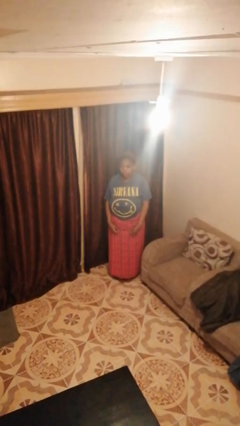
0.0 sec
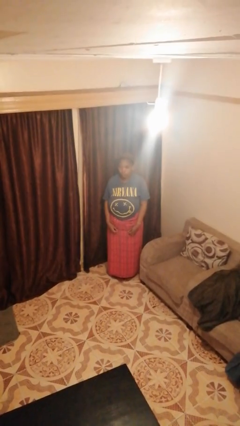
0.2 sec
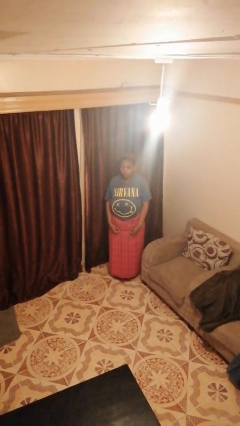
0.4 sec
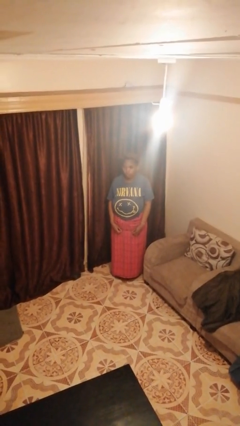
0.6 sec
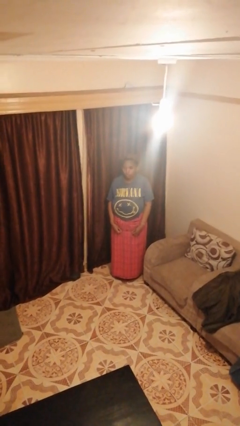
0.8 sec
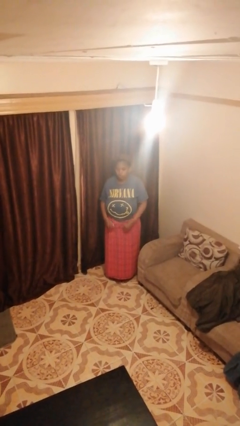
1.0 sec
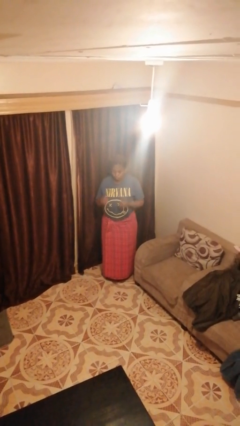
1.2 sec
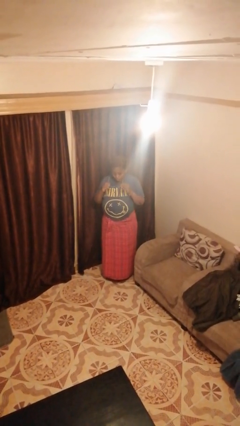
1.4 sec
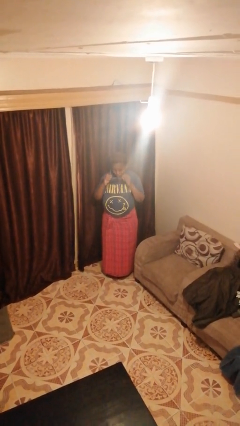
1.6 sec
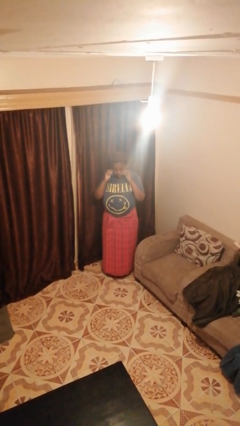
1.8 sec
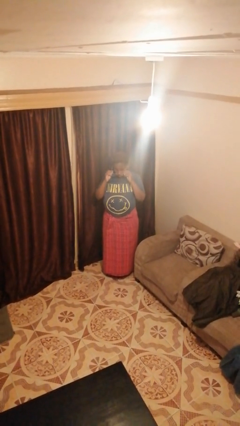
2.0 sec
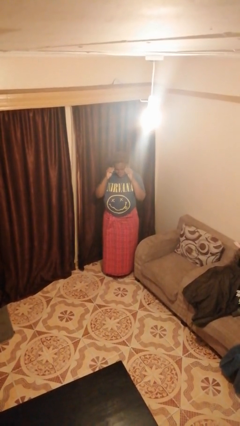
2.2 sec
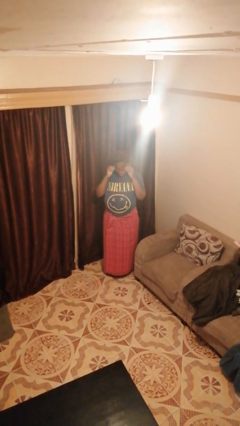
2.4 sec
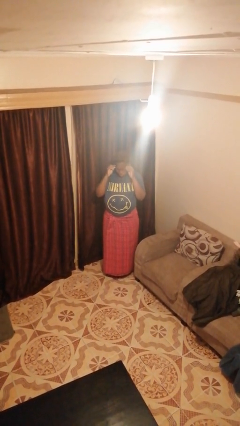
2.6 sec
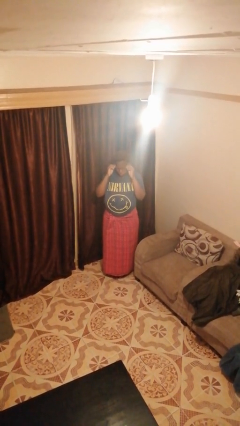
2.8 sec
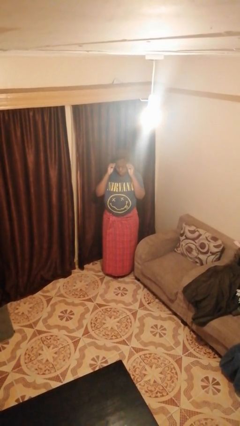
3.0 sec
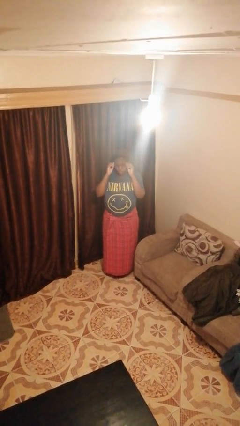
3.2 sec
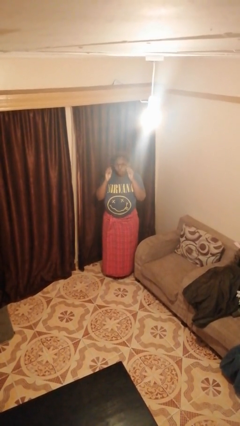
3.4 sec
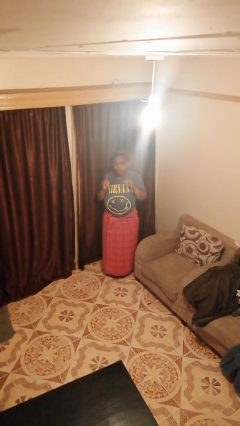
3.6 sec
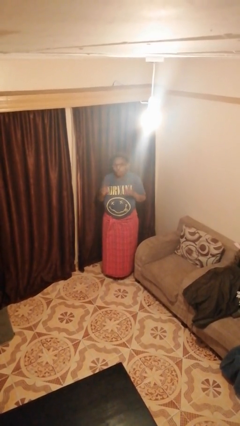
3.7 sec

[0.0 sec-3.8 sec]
person puts on glasses

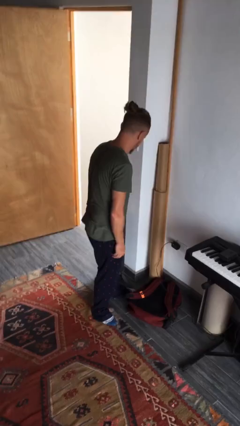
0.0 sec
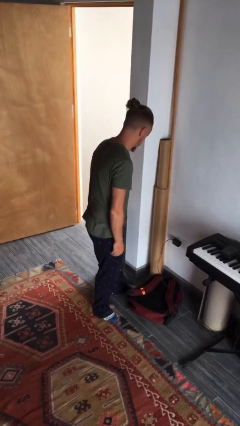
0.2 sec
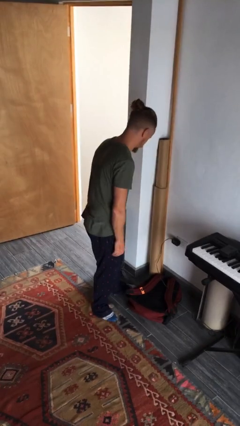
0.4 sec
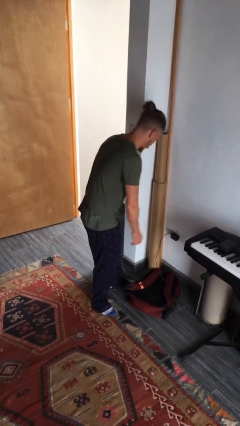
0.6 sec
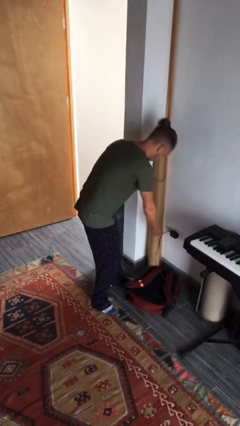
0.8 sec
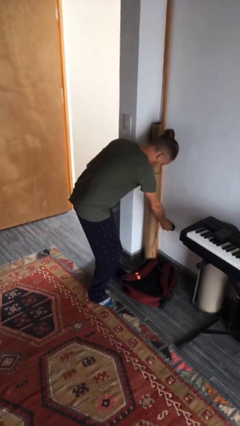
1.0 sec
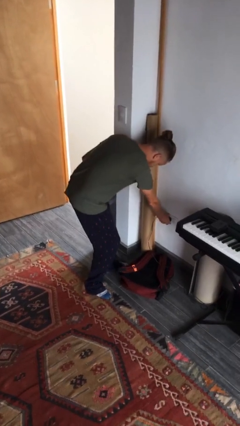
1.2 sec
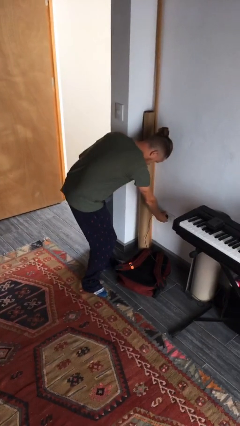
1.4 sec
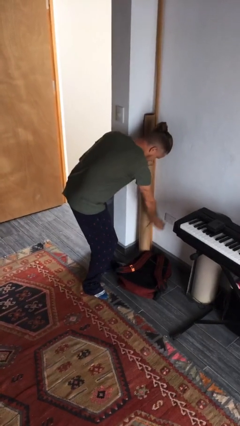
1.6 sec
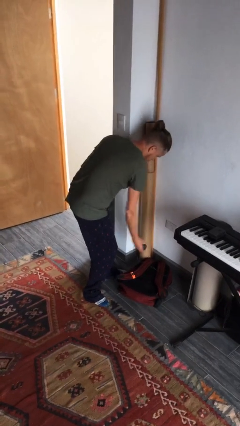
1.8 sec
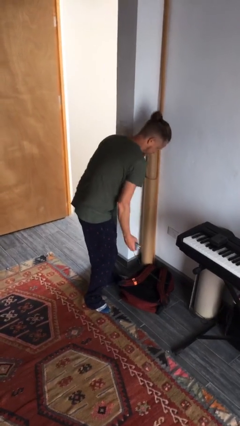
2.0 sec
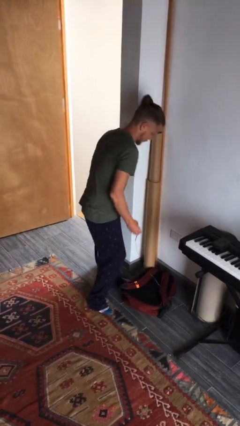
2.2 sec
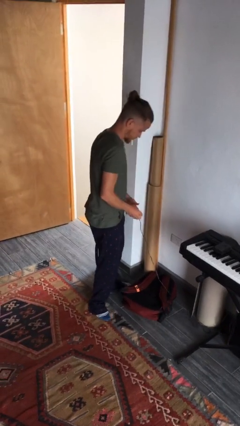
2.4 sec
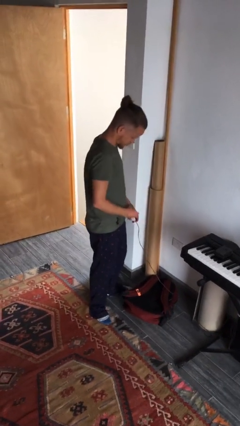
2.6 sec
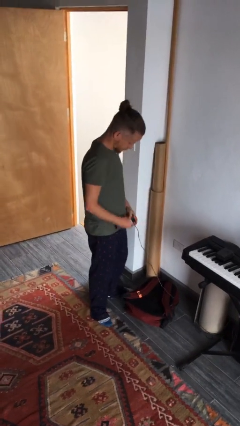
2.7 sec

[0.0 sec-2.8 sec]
person unplugs from electrical socket

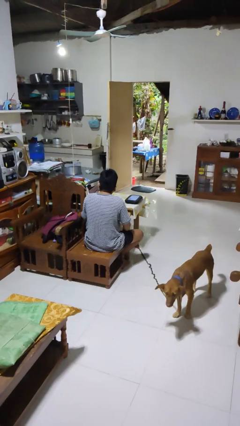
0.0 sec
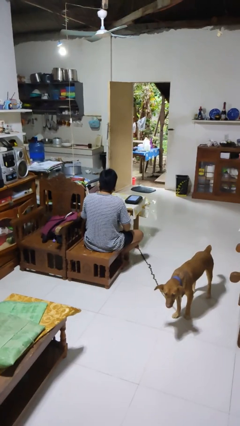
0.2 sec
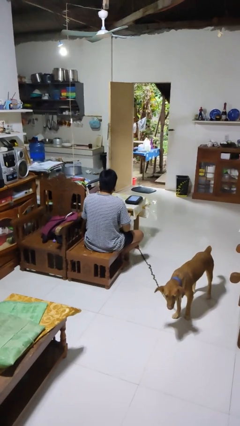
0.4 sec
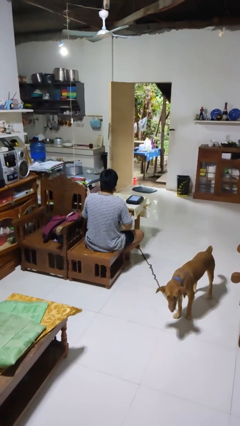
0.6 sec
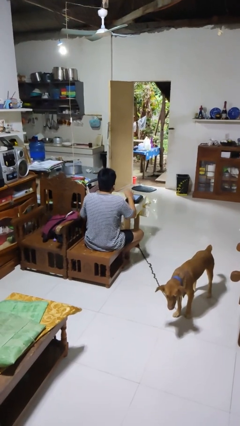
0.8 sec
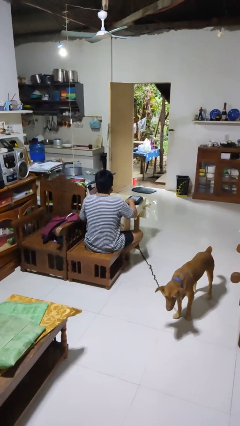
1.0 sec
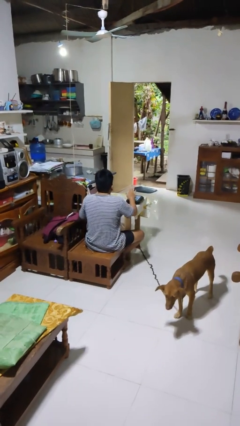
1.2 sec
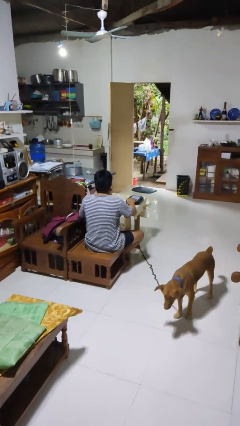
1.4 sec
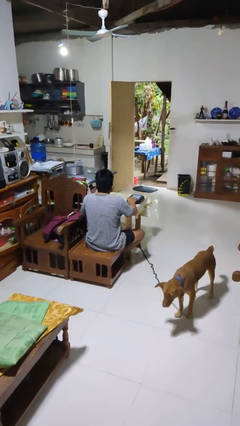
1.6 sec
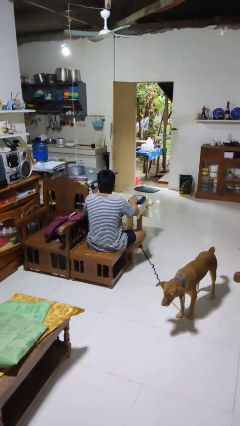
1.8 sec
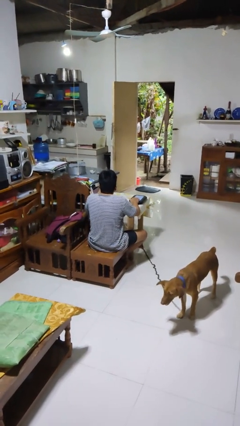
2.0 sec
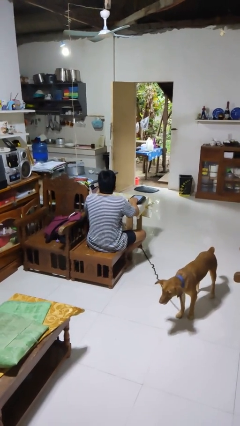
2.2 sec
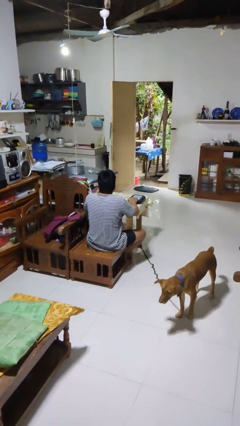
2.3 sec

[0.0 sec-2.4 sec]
person taps object with finger

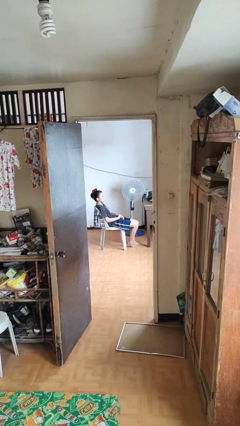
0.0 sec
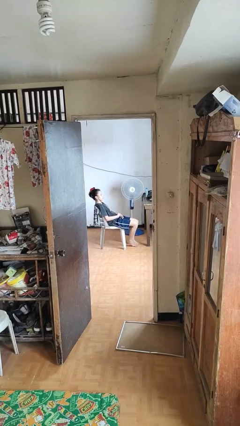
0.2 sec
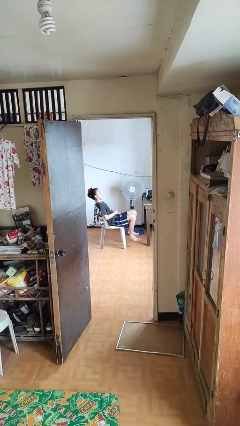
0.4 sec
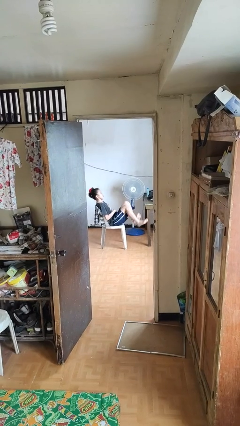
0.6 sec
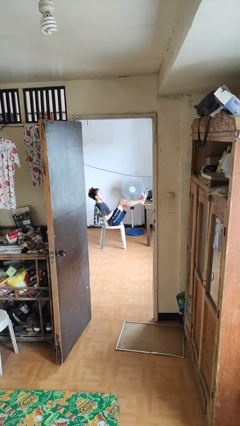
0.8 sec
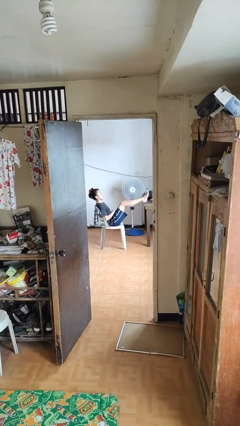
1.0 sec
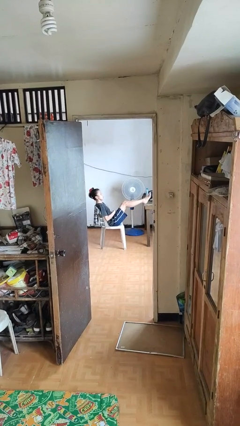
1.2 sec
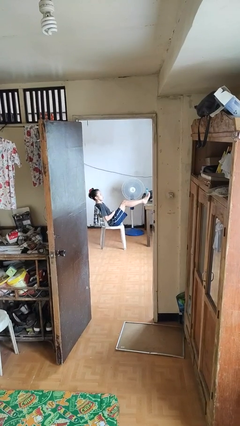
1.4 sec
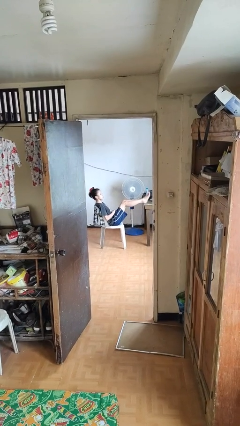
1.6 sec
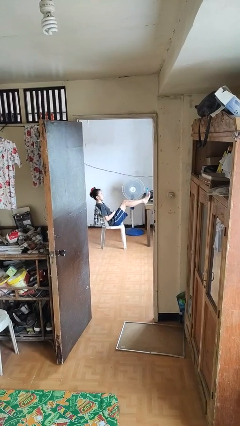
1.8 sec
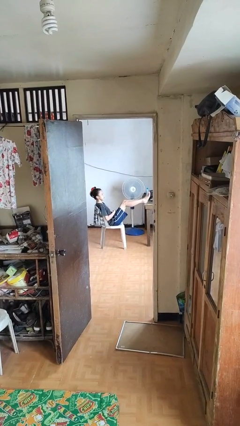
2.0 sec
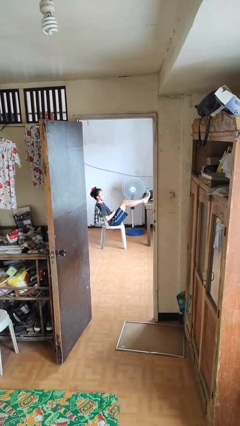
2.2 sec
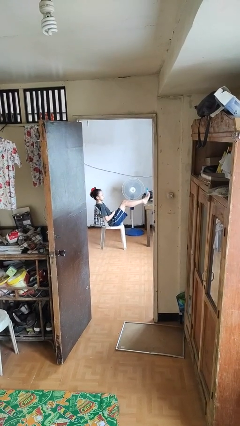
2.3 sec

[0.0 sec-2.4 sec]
person puts feet up

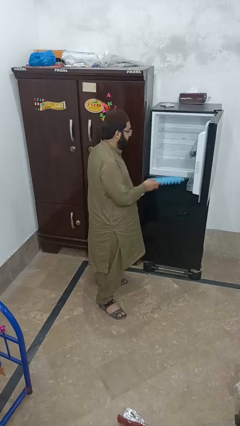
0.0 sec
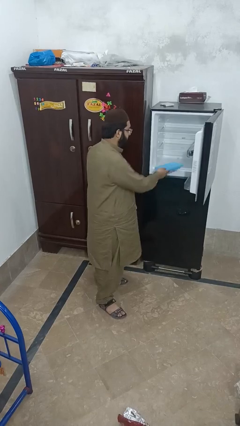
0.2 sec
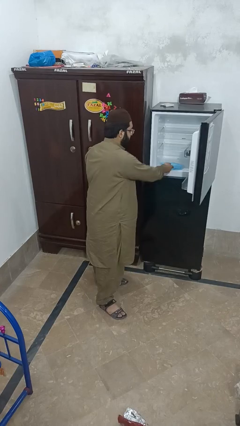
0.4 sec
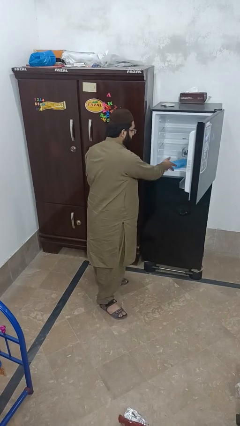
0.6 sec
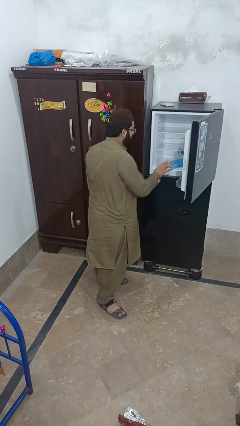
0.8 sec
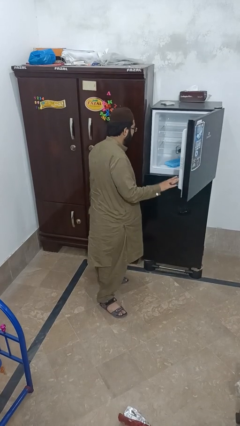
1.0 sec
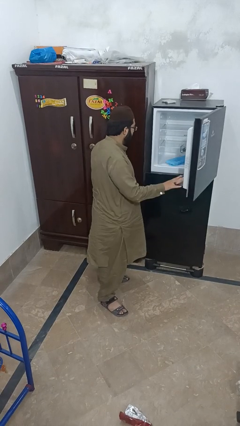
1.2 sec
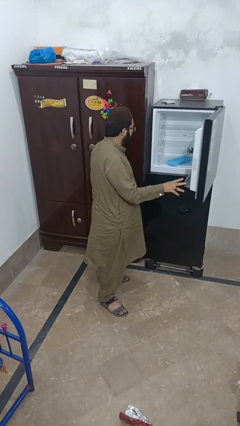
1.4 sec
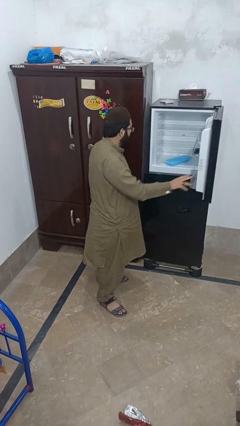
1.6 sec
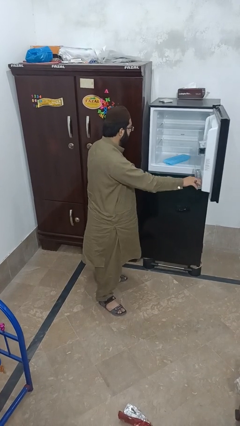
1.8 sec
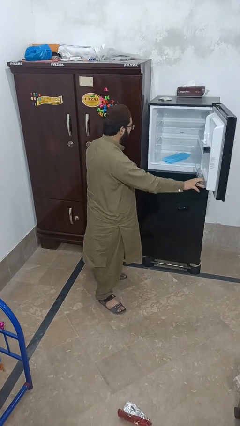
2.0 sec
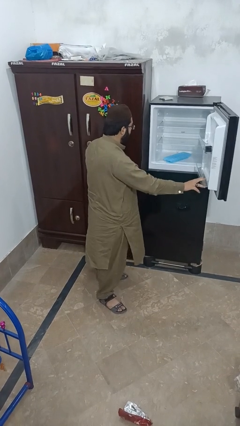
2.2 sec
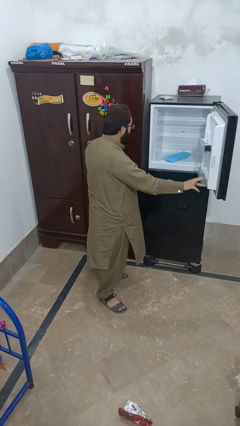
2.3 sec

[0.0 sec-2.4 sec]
person puts object into refrigerator

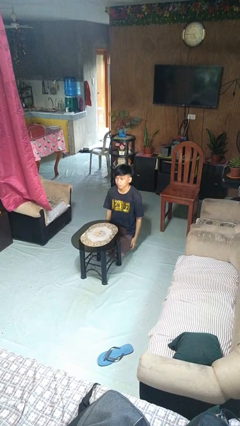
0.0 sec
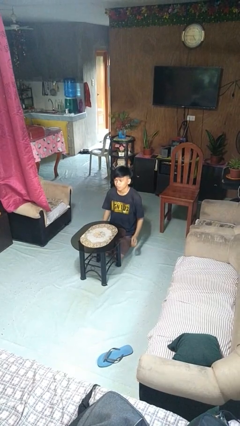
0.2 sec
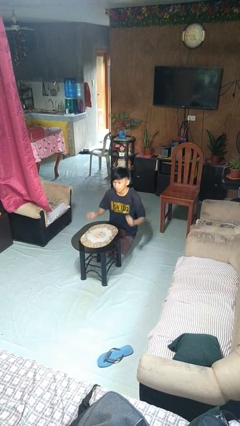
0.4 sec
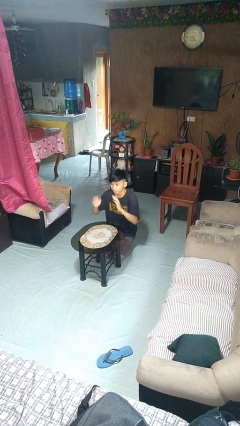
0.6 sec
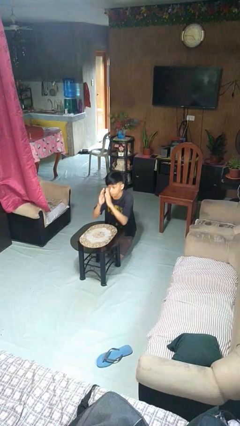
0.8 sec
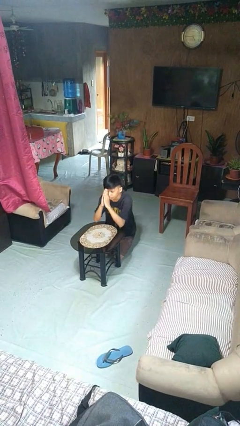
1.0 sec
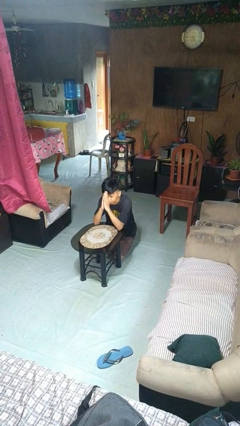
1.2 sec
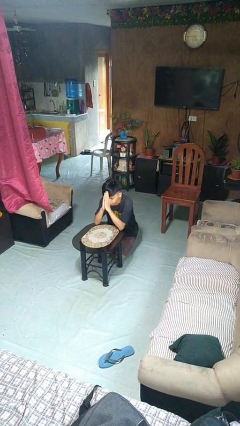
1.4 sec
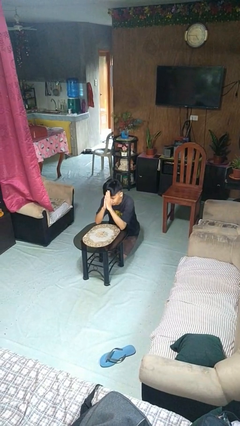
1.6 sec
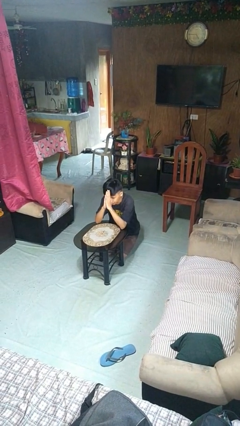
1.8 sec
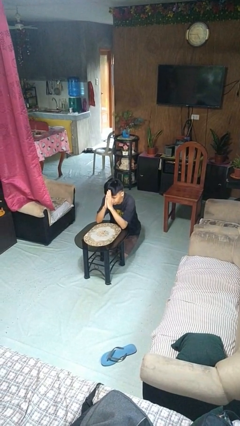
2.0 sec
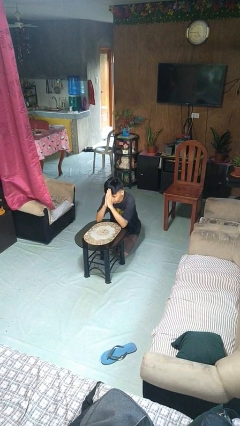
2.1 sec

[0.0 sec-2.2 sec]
person prays

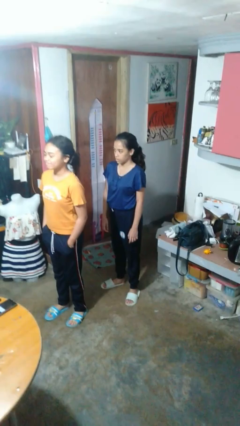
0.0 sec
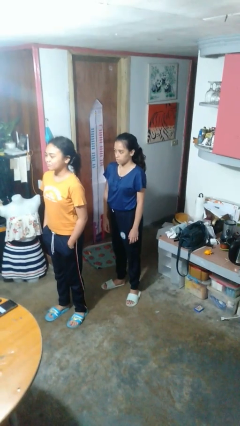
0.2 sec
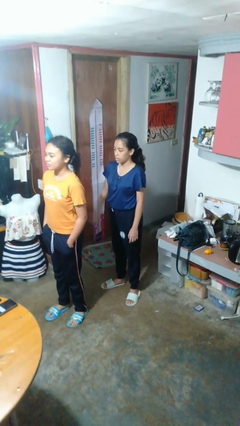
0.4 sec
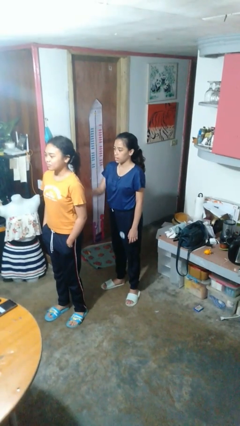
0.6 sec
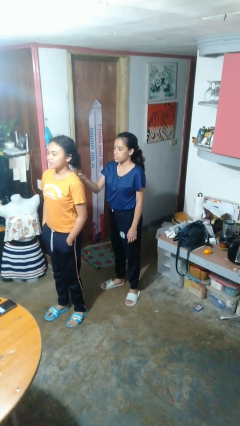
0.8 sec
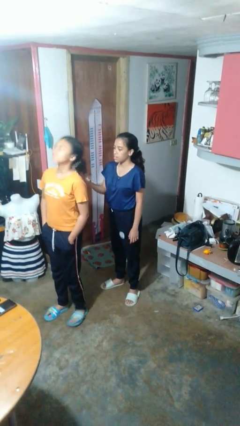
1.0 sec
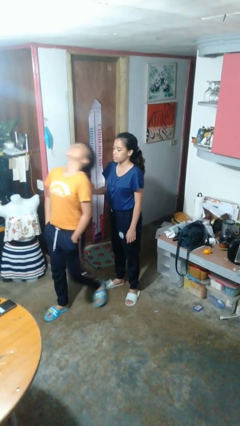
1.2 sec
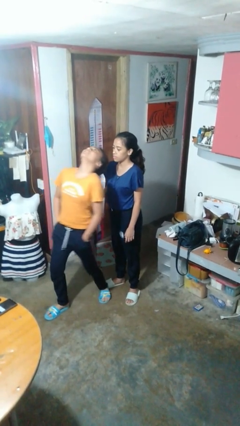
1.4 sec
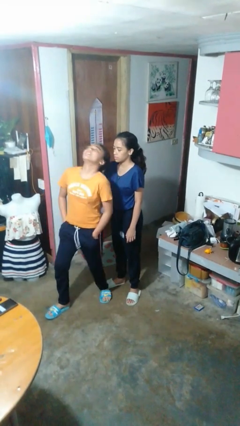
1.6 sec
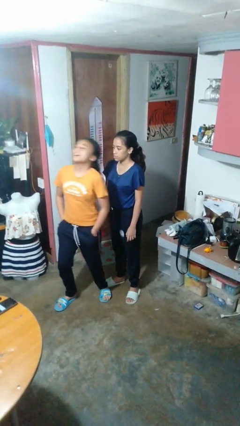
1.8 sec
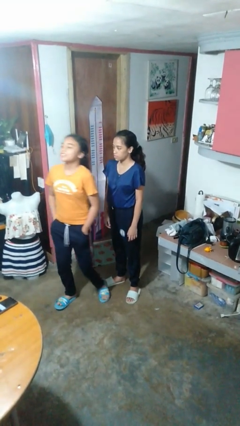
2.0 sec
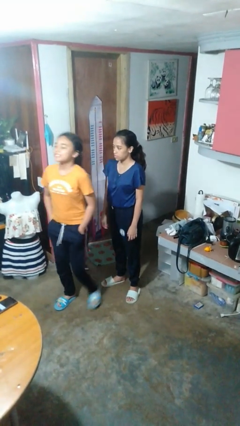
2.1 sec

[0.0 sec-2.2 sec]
person grabs person by hair
